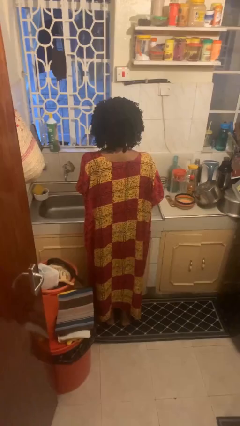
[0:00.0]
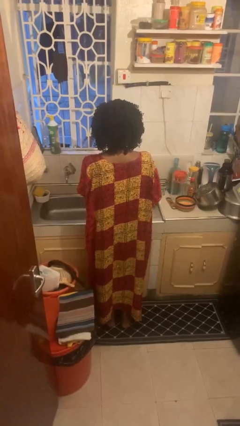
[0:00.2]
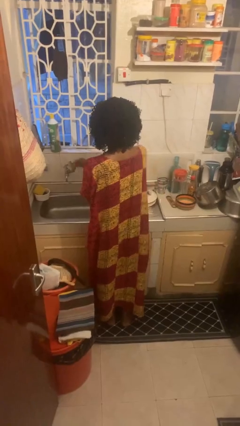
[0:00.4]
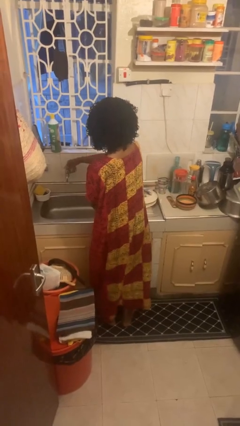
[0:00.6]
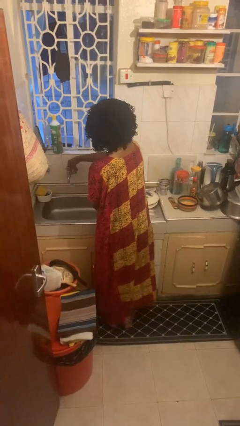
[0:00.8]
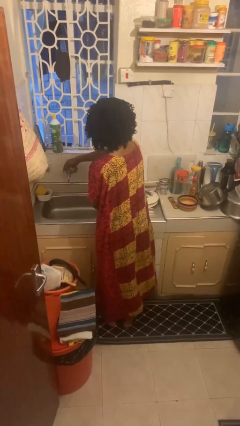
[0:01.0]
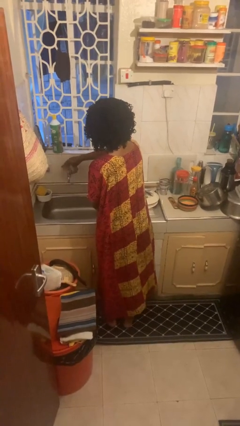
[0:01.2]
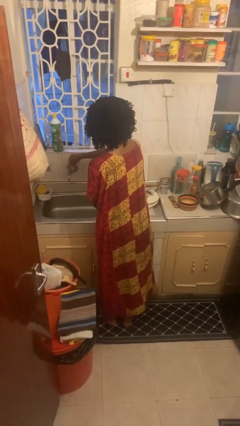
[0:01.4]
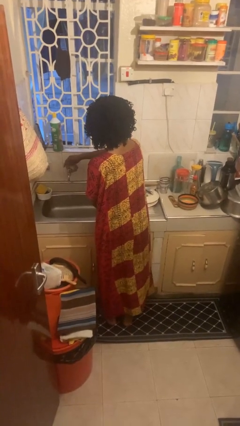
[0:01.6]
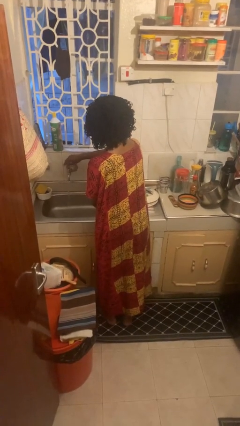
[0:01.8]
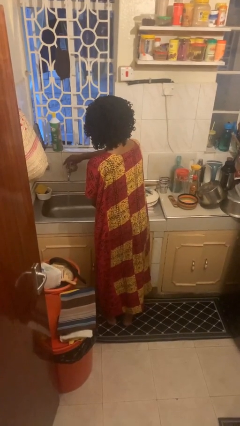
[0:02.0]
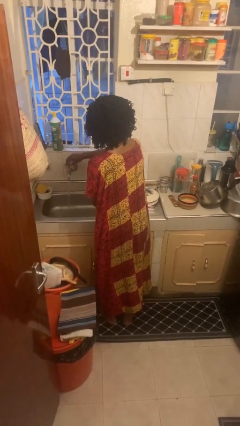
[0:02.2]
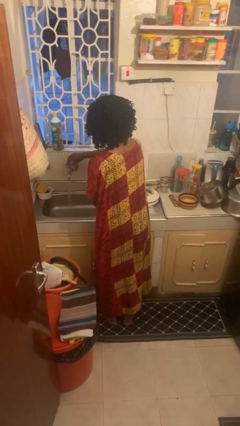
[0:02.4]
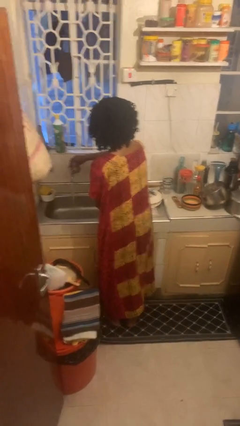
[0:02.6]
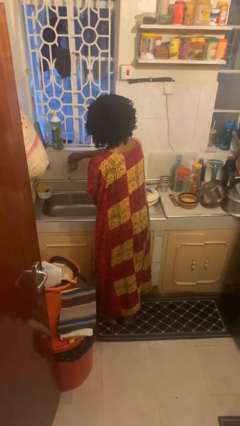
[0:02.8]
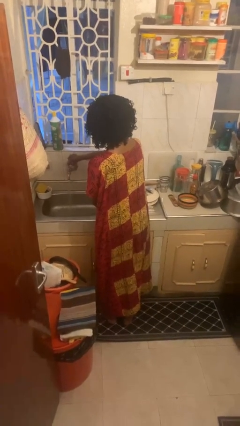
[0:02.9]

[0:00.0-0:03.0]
person turns on faucet

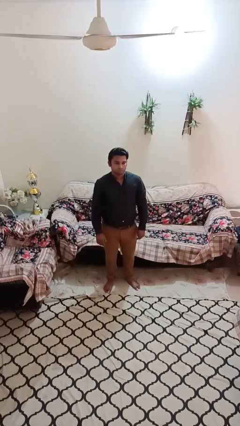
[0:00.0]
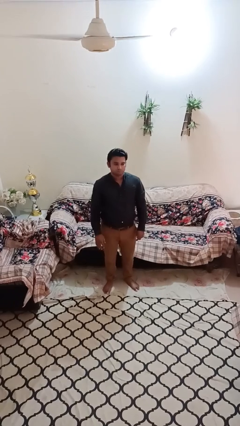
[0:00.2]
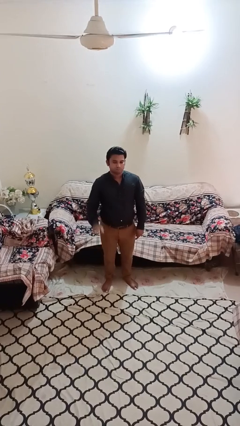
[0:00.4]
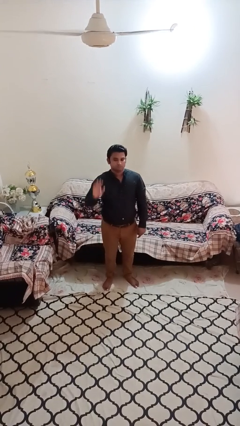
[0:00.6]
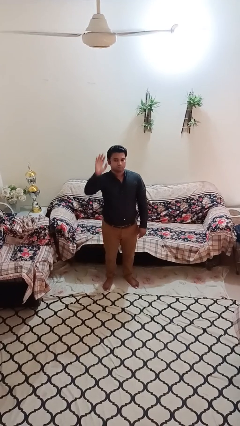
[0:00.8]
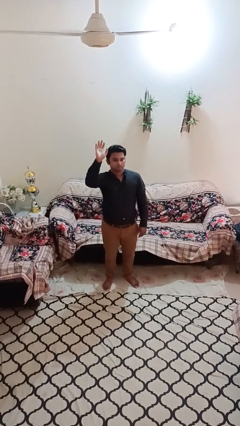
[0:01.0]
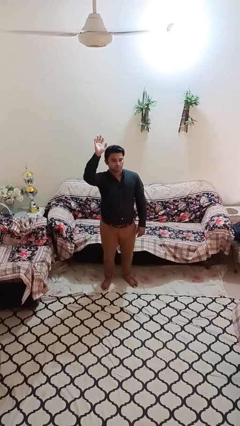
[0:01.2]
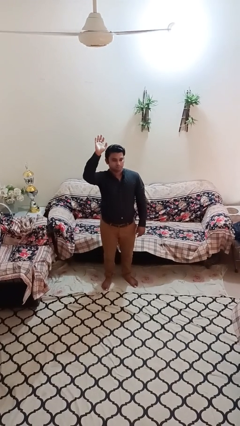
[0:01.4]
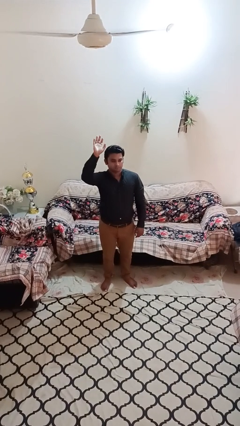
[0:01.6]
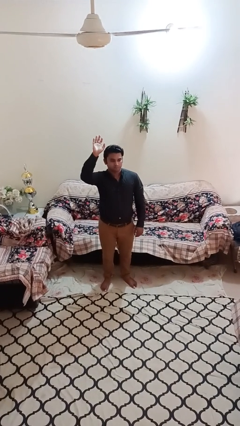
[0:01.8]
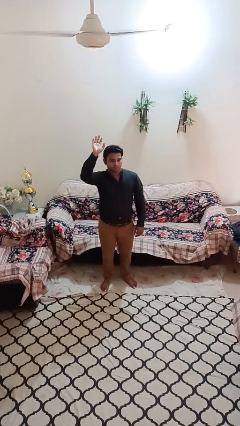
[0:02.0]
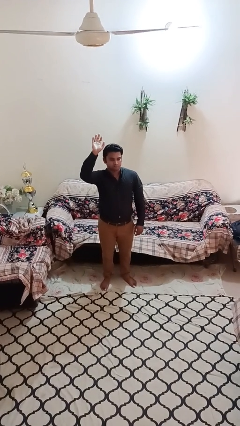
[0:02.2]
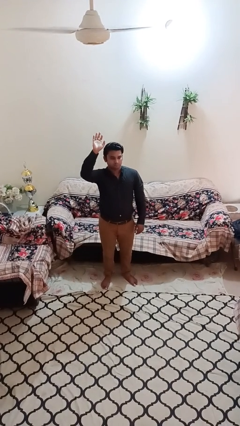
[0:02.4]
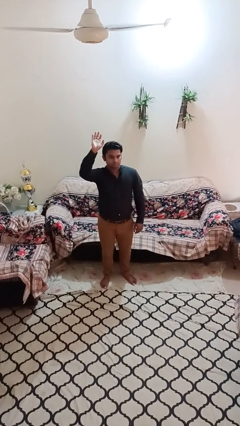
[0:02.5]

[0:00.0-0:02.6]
person gestures raise hand

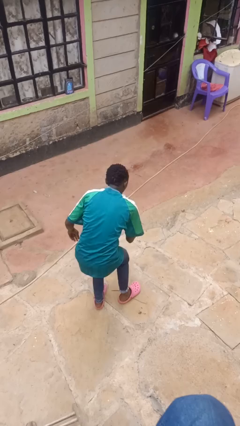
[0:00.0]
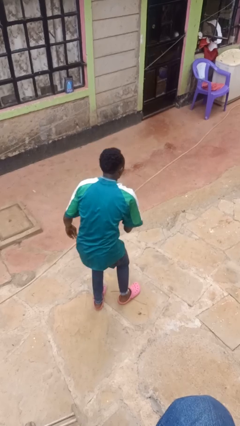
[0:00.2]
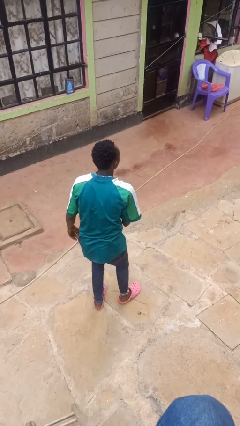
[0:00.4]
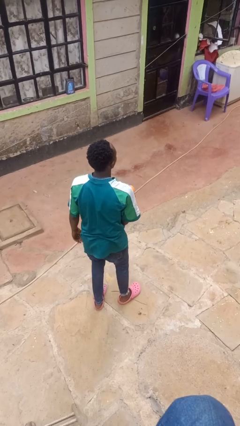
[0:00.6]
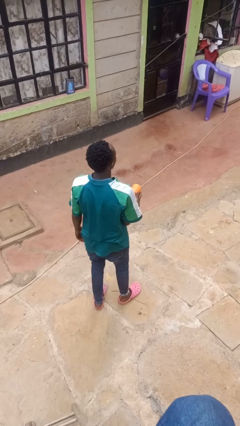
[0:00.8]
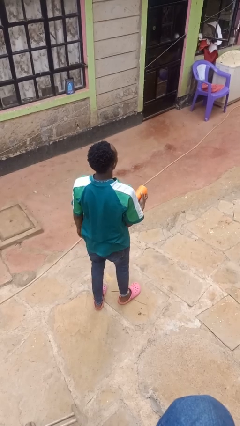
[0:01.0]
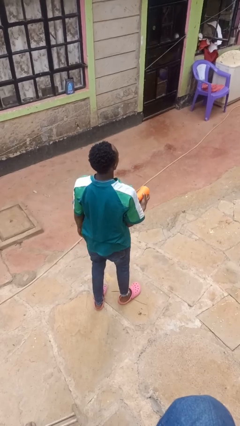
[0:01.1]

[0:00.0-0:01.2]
person drops object

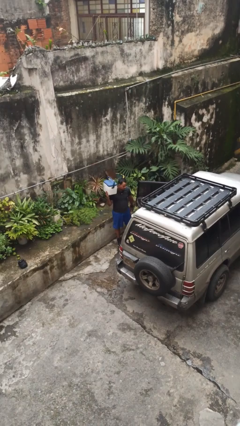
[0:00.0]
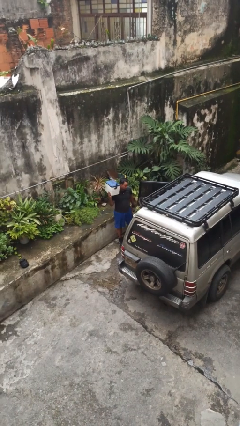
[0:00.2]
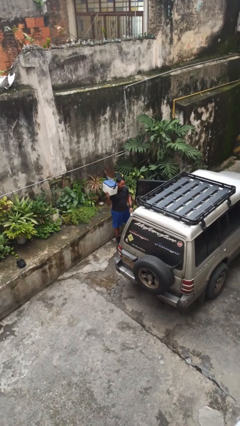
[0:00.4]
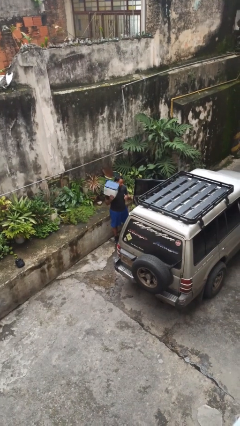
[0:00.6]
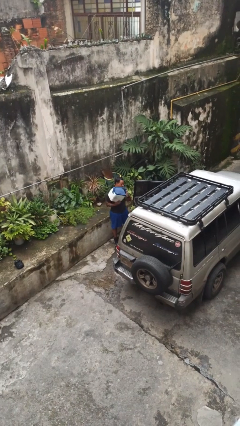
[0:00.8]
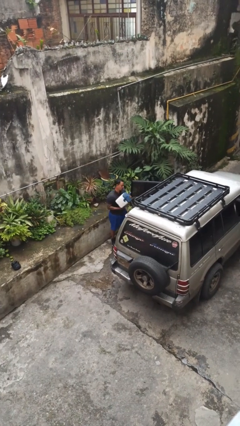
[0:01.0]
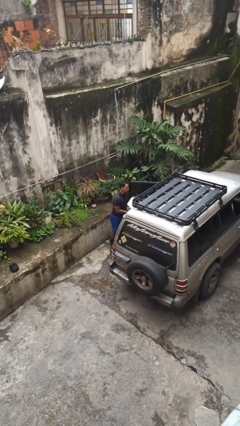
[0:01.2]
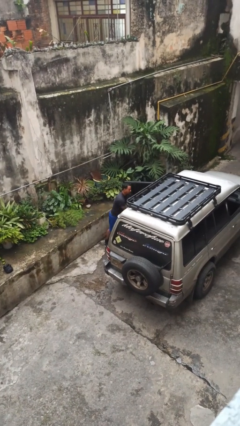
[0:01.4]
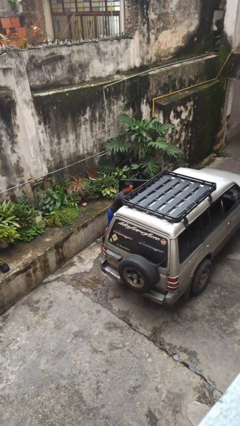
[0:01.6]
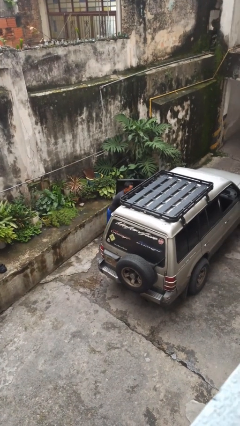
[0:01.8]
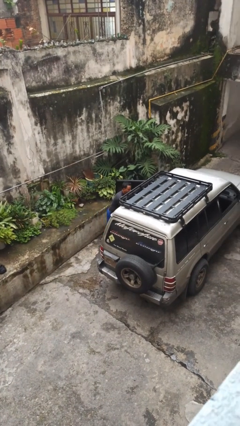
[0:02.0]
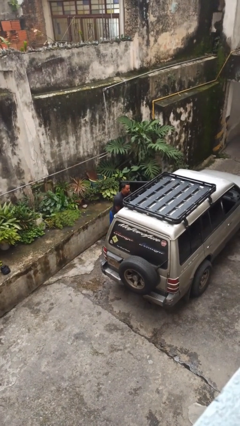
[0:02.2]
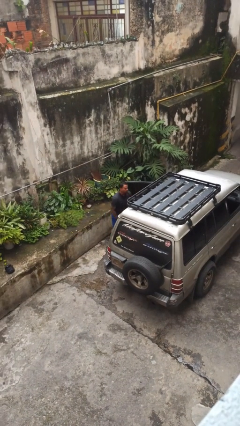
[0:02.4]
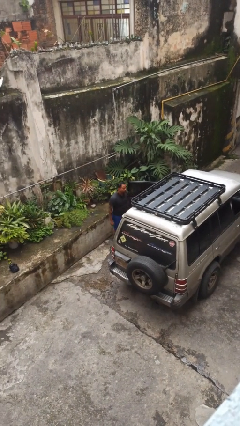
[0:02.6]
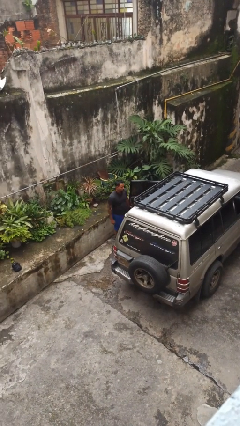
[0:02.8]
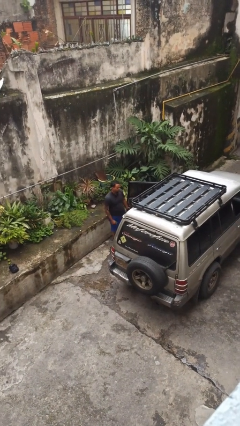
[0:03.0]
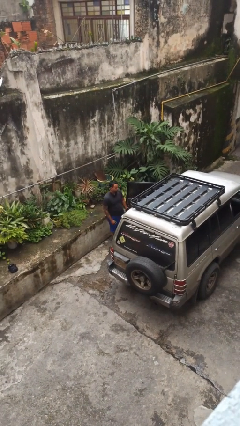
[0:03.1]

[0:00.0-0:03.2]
person loads car

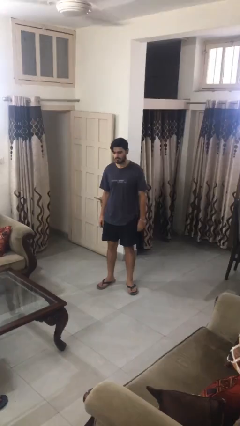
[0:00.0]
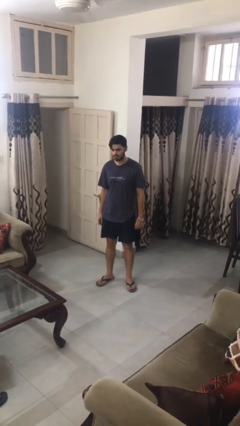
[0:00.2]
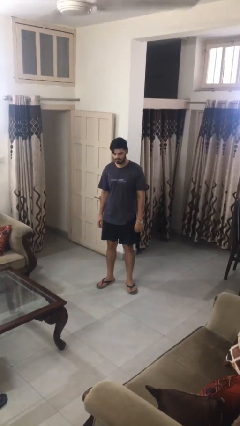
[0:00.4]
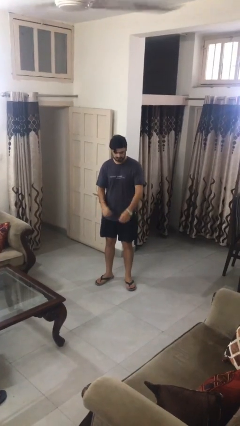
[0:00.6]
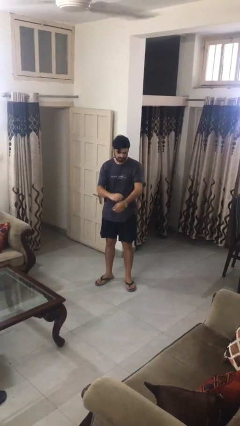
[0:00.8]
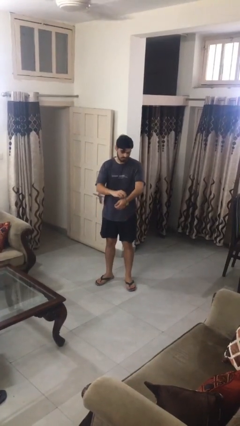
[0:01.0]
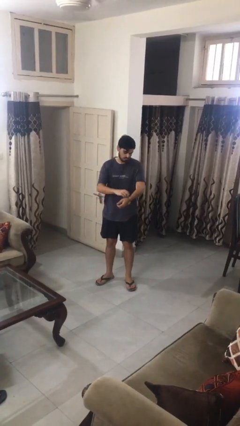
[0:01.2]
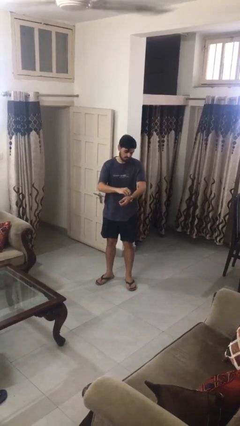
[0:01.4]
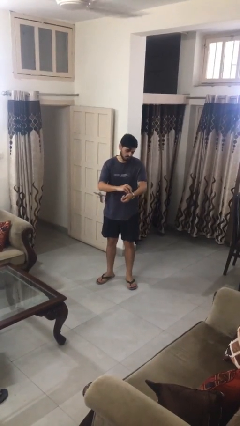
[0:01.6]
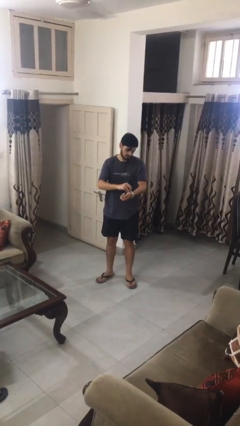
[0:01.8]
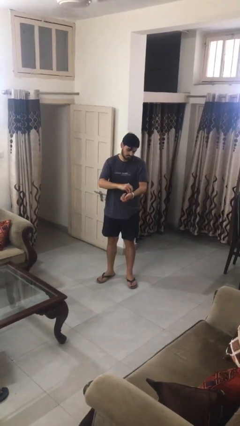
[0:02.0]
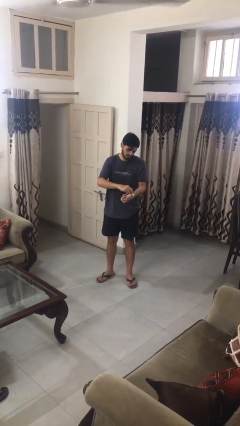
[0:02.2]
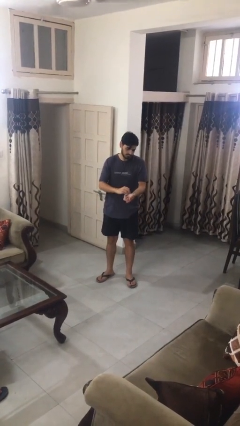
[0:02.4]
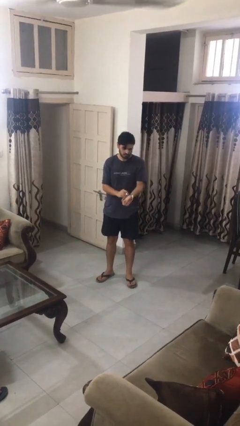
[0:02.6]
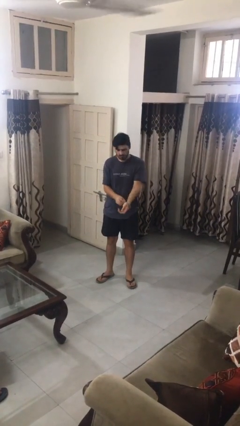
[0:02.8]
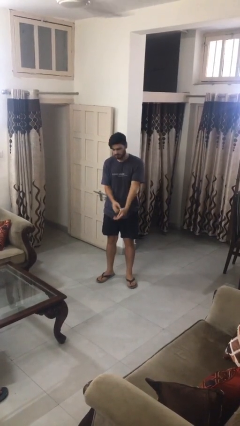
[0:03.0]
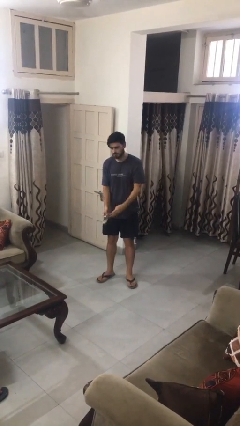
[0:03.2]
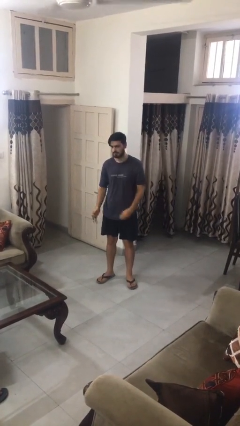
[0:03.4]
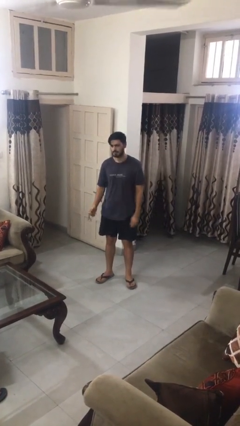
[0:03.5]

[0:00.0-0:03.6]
person takes off wristwatch

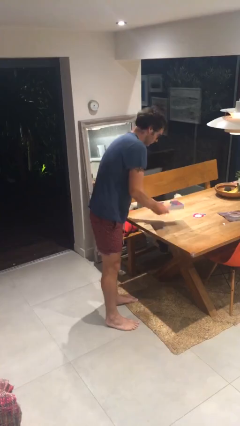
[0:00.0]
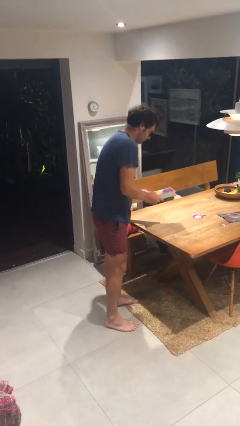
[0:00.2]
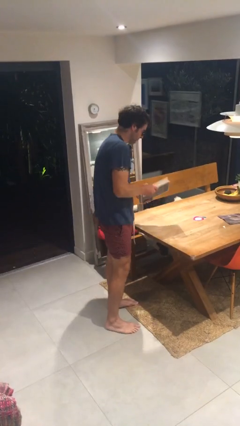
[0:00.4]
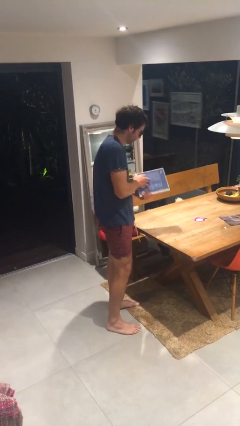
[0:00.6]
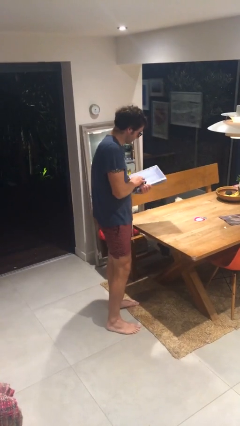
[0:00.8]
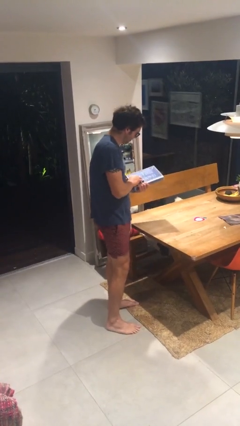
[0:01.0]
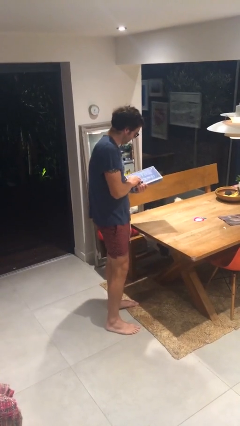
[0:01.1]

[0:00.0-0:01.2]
person picks up object from table

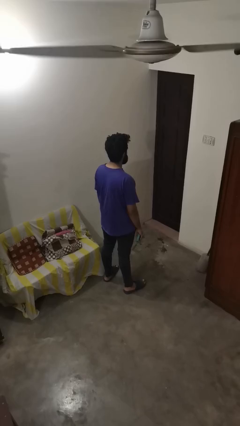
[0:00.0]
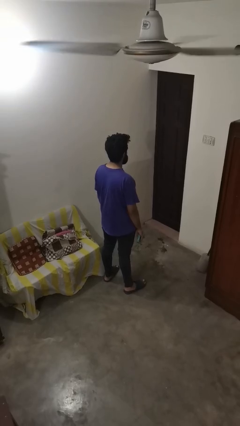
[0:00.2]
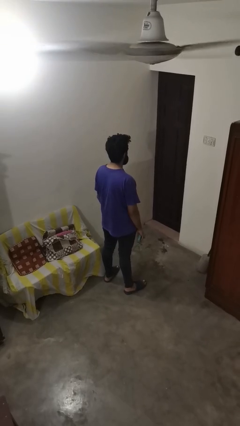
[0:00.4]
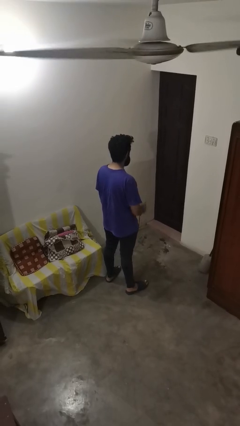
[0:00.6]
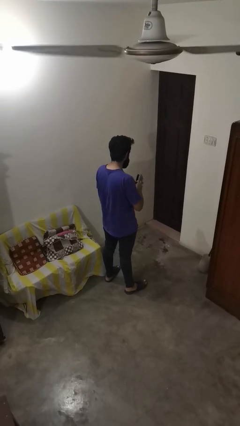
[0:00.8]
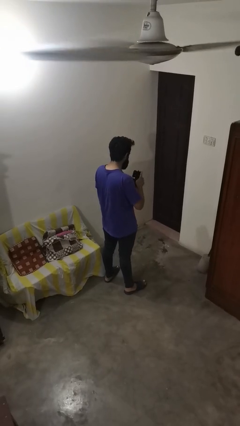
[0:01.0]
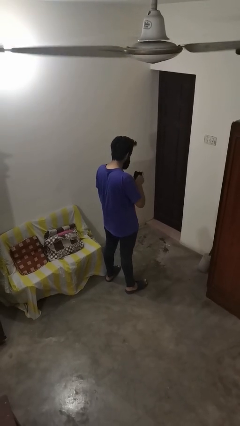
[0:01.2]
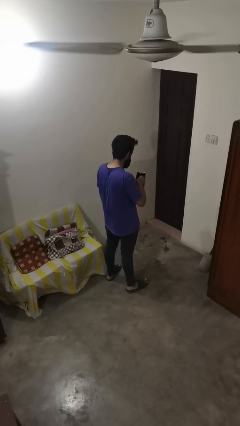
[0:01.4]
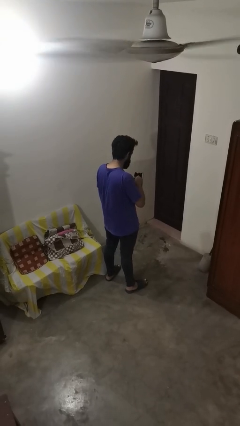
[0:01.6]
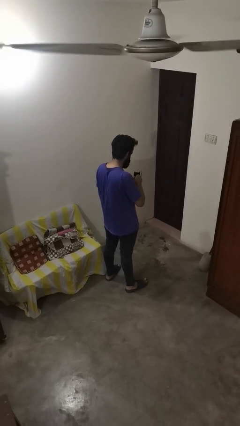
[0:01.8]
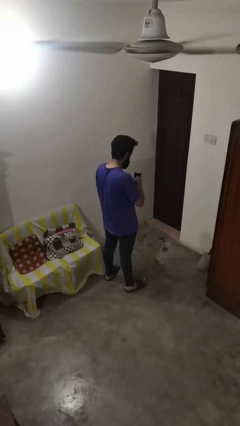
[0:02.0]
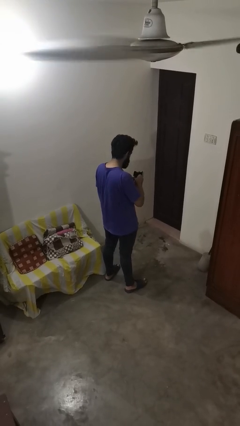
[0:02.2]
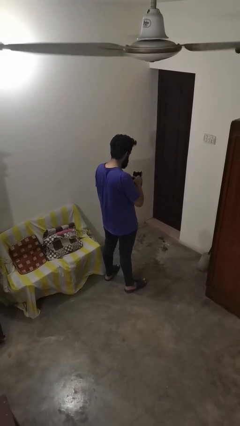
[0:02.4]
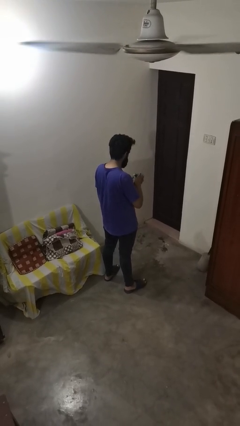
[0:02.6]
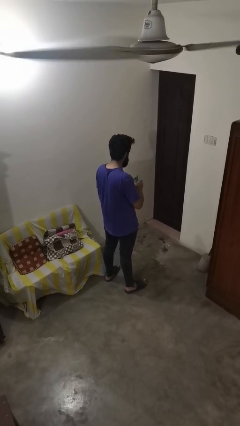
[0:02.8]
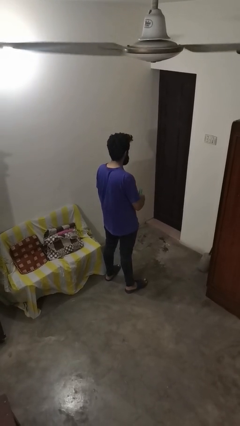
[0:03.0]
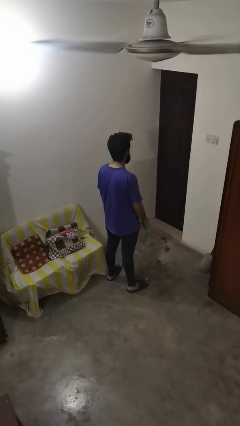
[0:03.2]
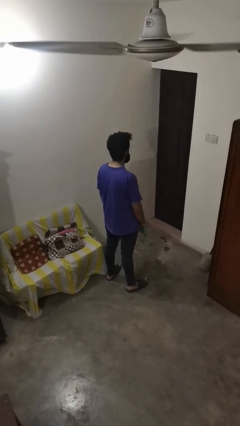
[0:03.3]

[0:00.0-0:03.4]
person searches in bag
